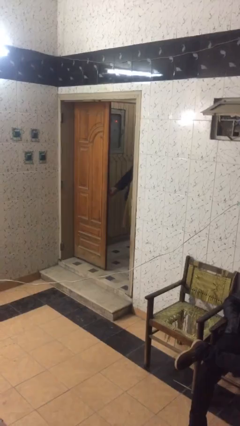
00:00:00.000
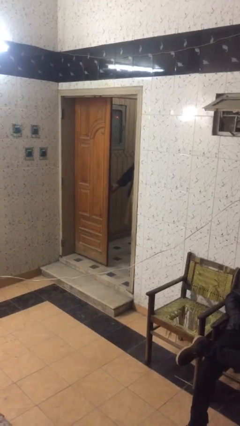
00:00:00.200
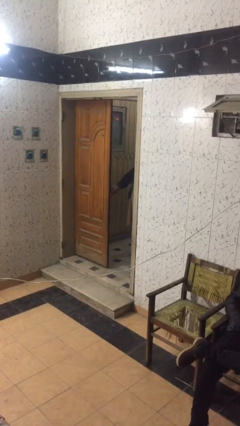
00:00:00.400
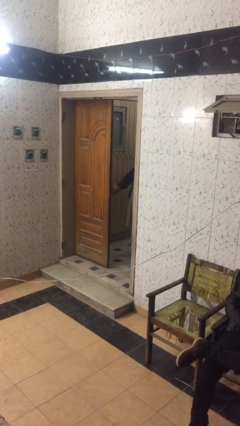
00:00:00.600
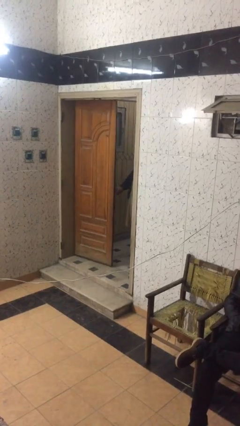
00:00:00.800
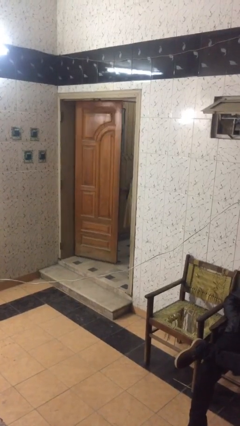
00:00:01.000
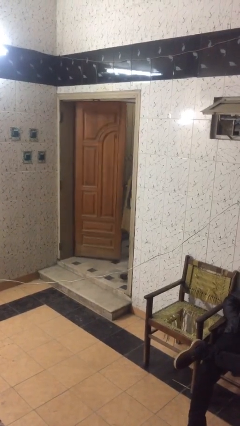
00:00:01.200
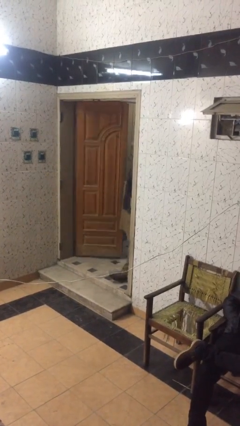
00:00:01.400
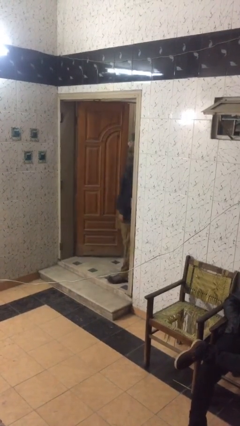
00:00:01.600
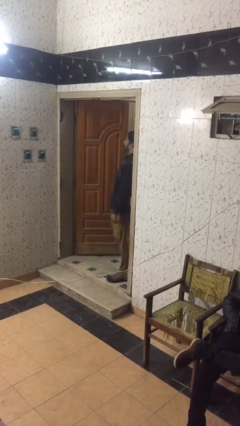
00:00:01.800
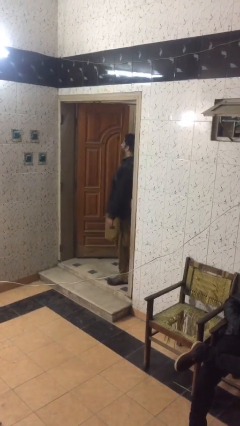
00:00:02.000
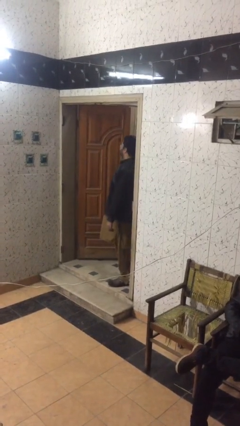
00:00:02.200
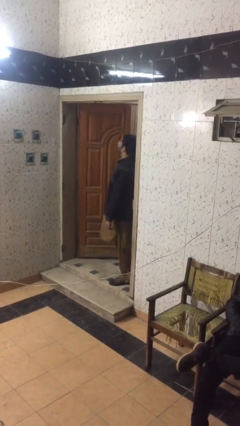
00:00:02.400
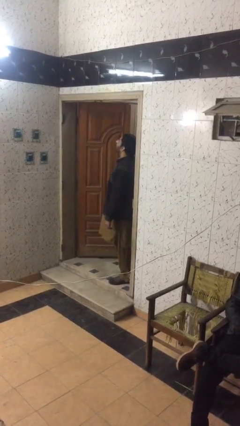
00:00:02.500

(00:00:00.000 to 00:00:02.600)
person opens facility door

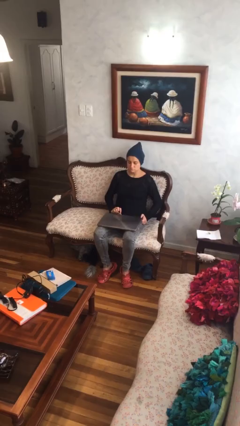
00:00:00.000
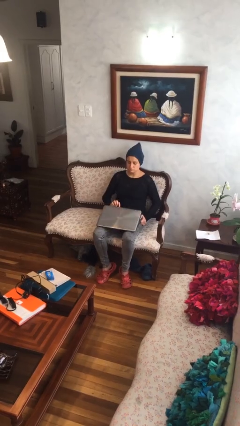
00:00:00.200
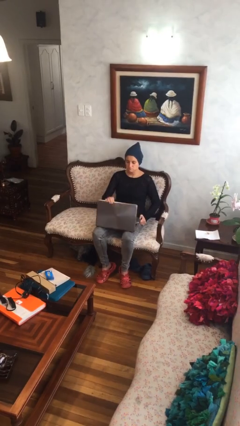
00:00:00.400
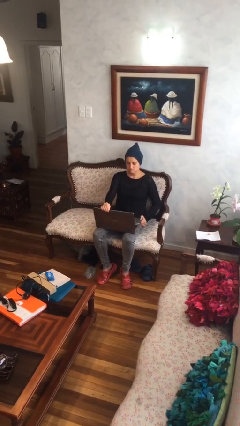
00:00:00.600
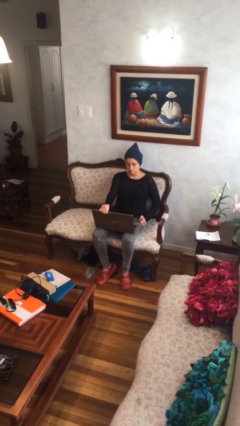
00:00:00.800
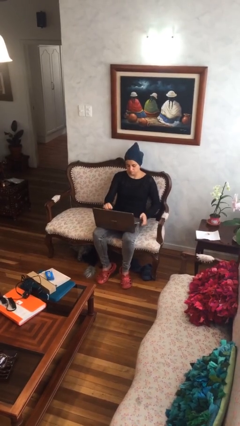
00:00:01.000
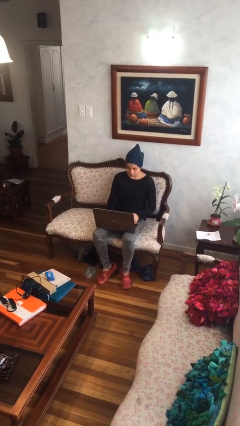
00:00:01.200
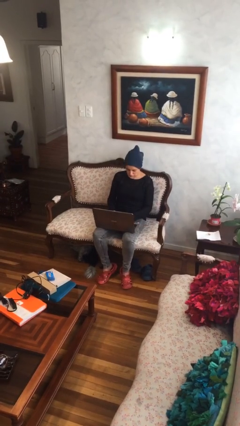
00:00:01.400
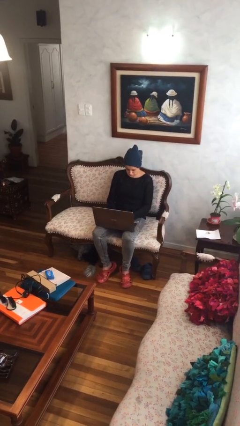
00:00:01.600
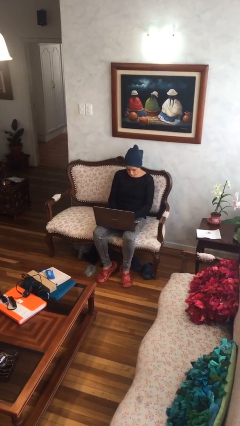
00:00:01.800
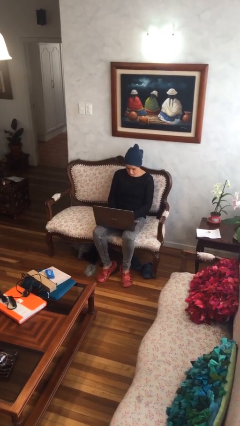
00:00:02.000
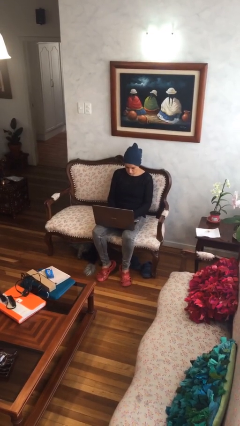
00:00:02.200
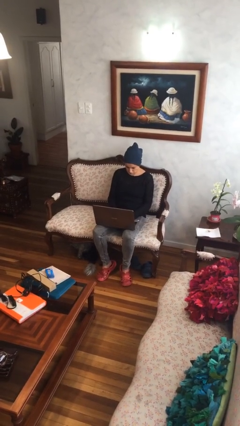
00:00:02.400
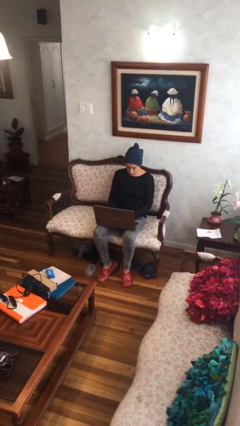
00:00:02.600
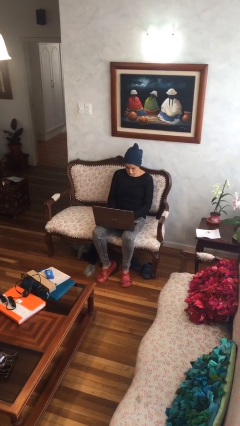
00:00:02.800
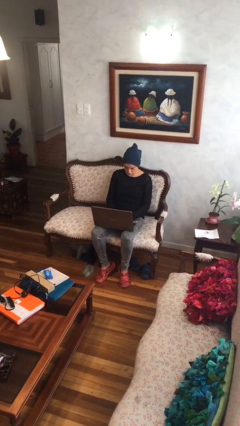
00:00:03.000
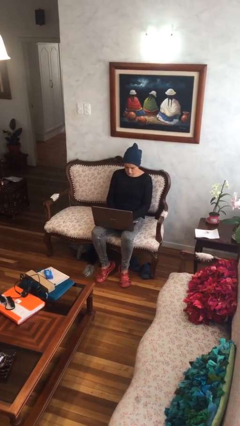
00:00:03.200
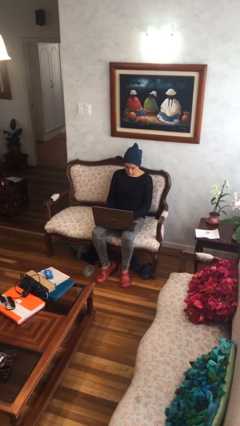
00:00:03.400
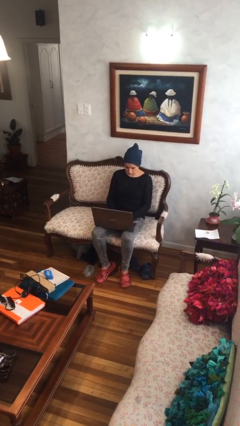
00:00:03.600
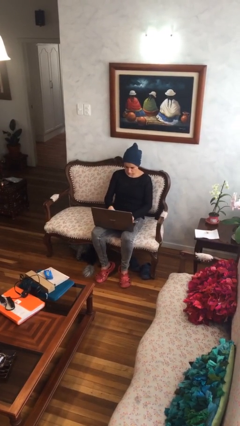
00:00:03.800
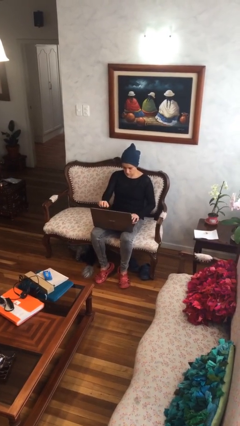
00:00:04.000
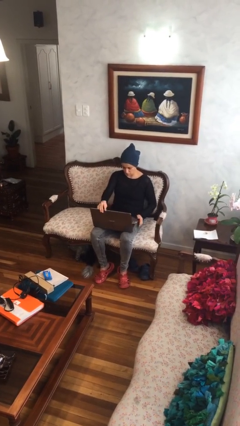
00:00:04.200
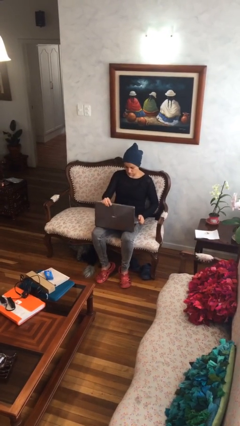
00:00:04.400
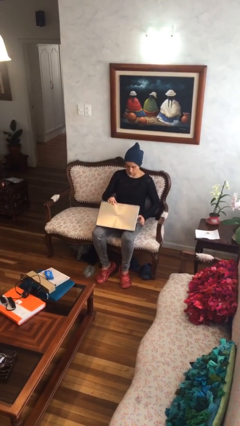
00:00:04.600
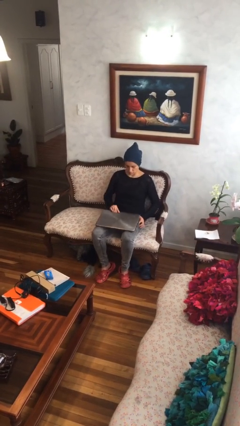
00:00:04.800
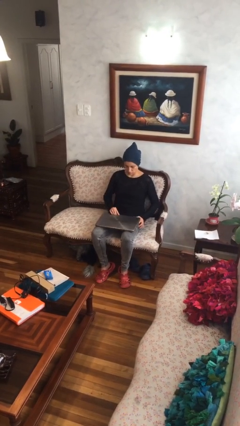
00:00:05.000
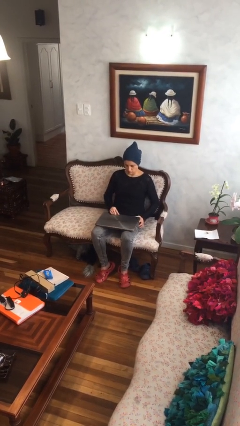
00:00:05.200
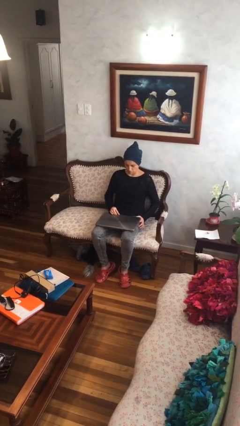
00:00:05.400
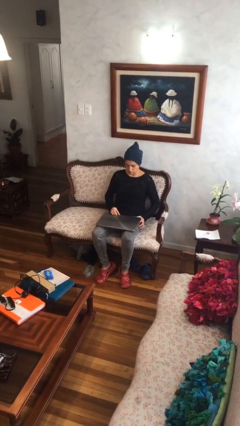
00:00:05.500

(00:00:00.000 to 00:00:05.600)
person interacts with laptop

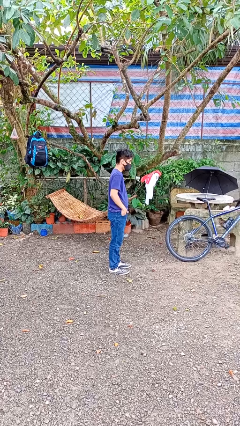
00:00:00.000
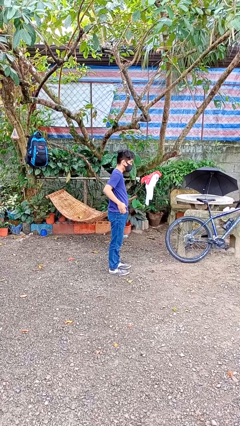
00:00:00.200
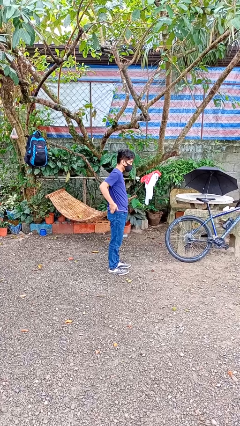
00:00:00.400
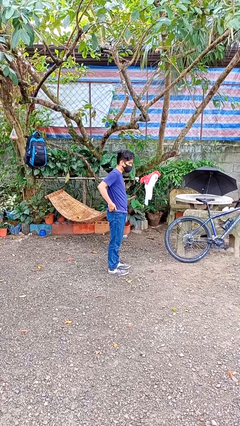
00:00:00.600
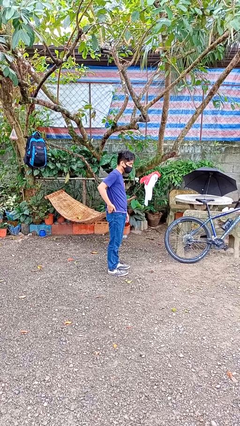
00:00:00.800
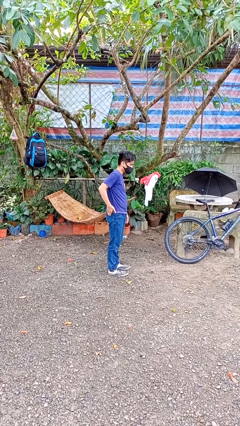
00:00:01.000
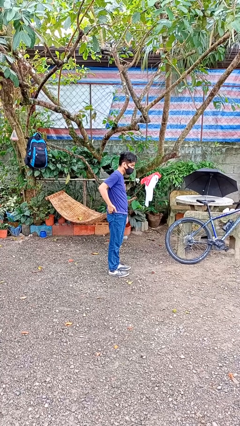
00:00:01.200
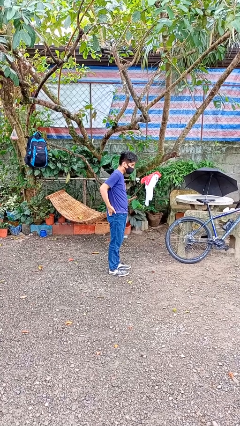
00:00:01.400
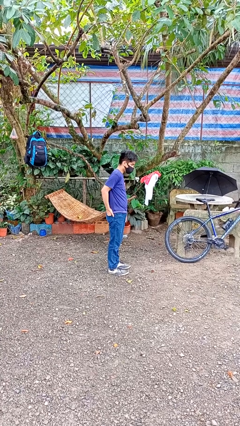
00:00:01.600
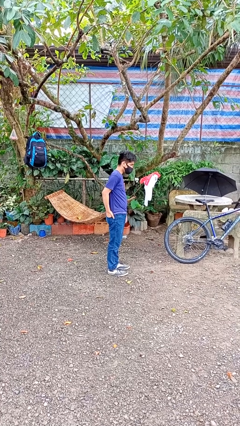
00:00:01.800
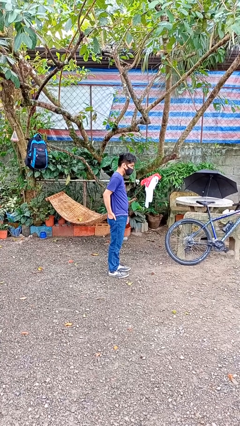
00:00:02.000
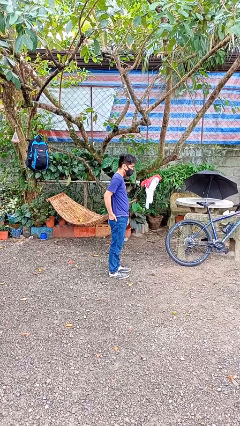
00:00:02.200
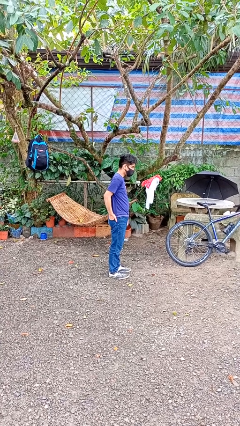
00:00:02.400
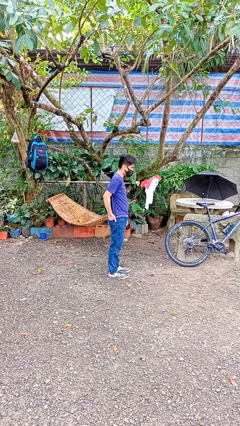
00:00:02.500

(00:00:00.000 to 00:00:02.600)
person puts hands in back pockets

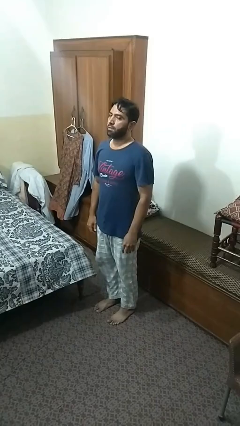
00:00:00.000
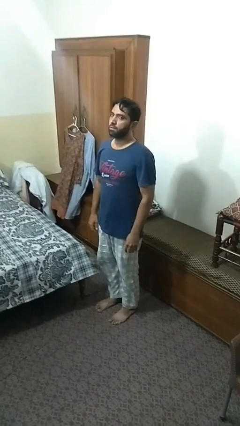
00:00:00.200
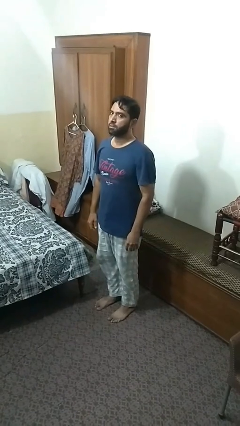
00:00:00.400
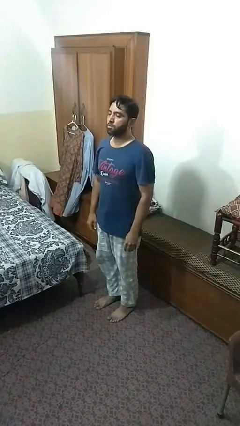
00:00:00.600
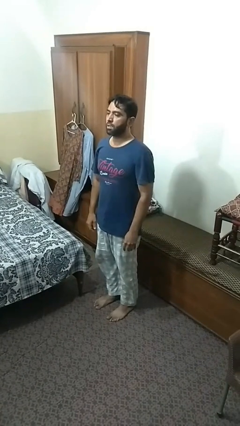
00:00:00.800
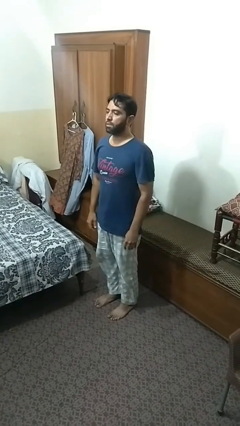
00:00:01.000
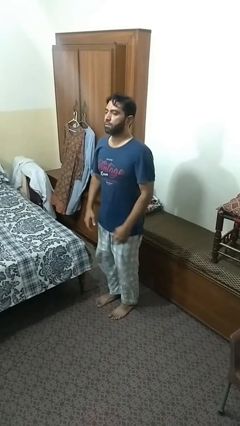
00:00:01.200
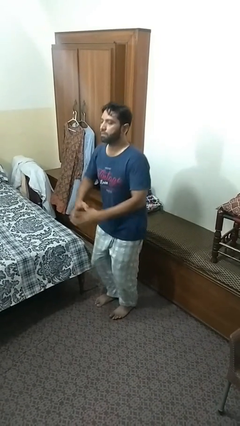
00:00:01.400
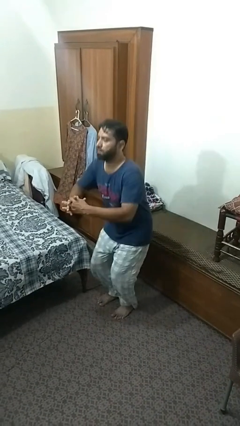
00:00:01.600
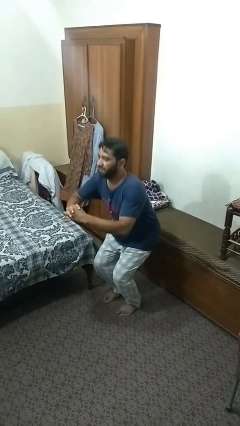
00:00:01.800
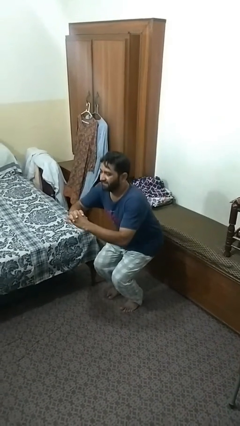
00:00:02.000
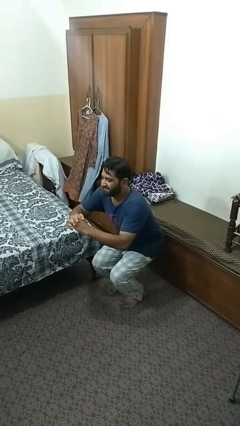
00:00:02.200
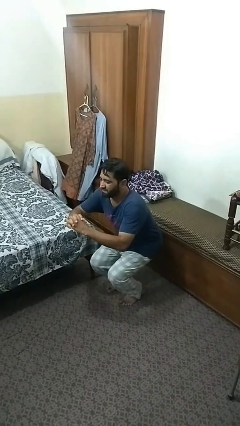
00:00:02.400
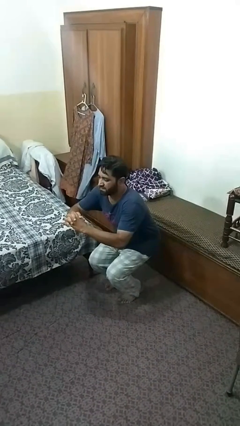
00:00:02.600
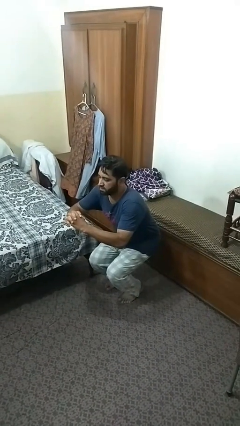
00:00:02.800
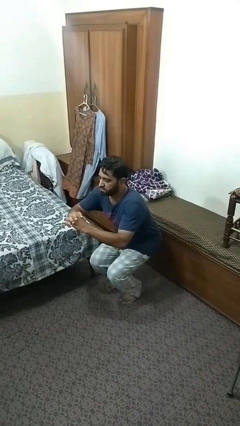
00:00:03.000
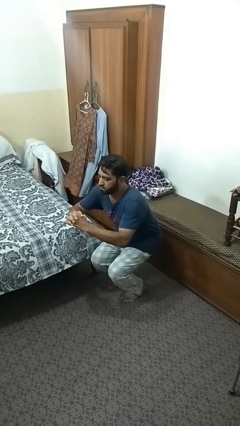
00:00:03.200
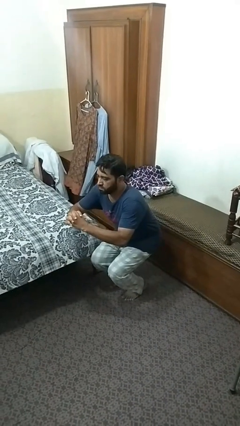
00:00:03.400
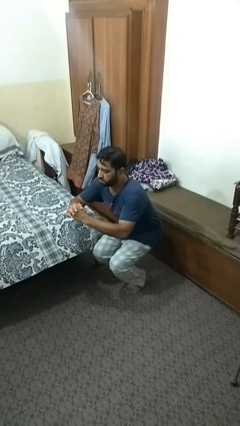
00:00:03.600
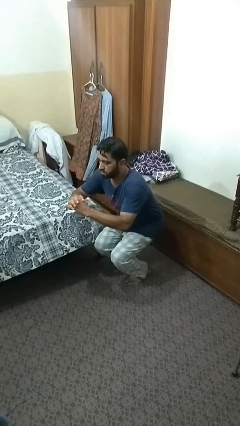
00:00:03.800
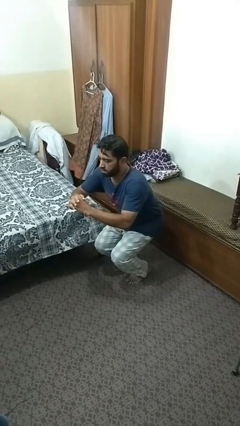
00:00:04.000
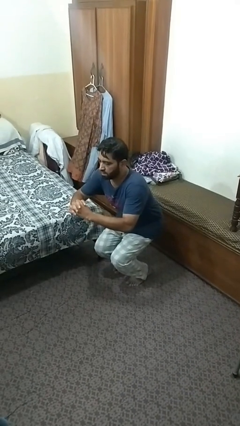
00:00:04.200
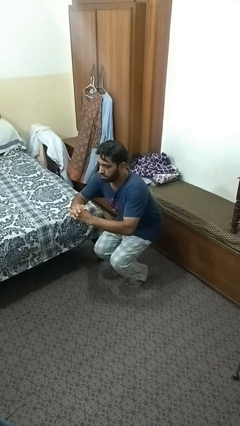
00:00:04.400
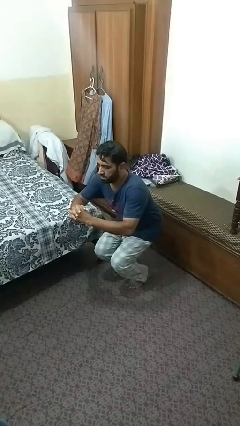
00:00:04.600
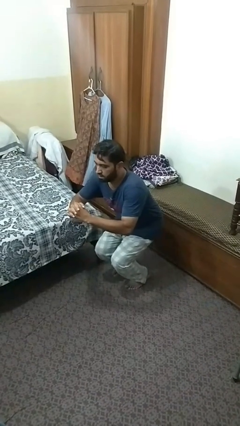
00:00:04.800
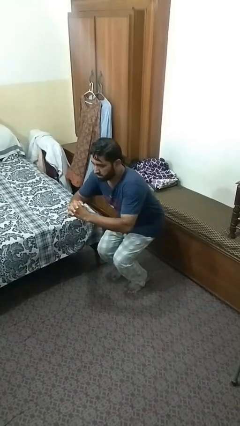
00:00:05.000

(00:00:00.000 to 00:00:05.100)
person squats

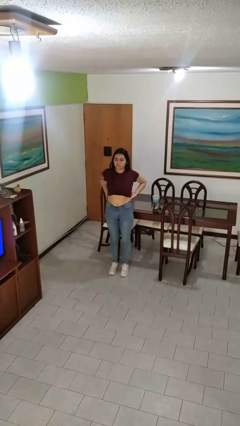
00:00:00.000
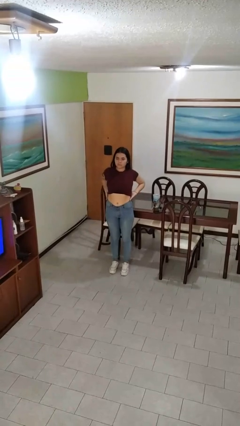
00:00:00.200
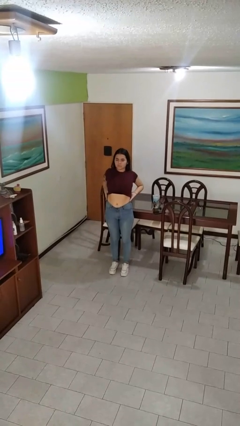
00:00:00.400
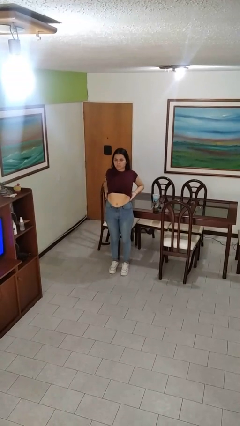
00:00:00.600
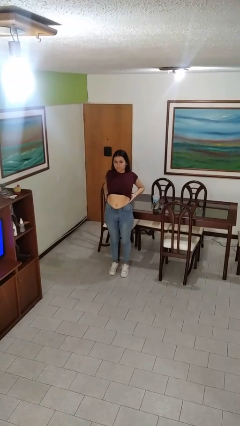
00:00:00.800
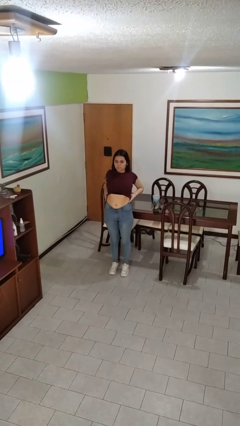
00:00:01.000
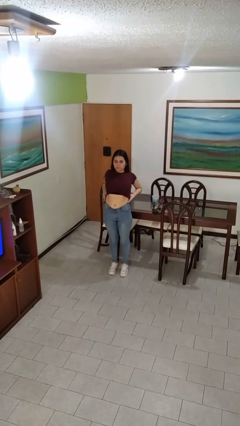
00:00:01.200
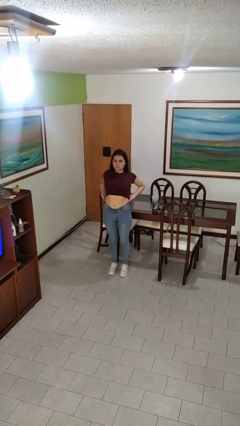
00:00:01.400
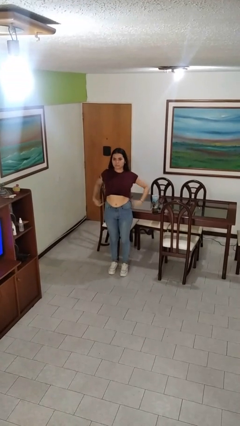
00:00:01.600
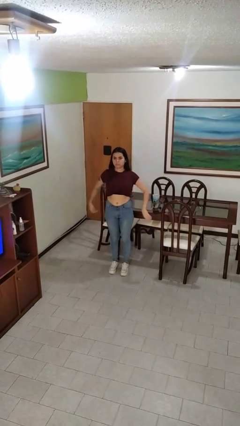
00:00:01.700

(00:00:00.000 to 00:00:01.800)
person stretches back

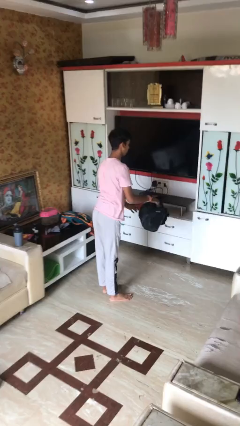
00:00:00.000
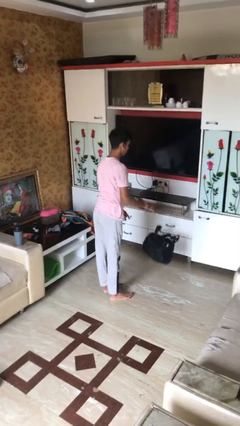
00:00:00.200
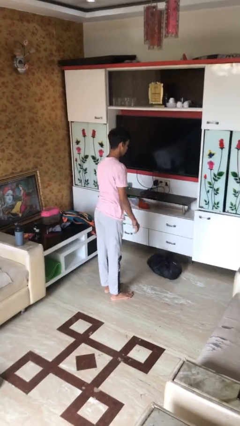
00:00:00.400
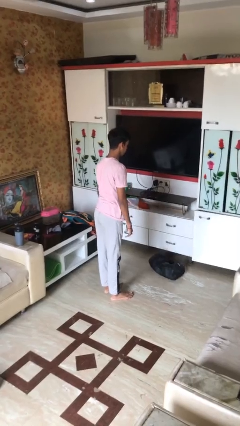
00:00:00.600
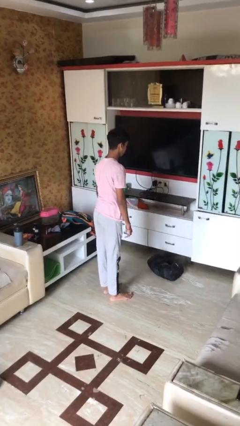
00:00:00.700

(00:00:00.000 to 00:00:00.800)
person drops object
